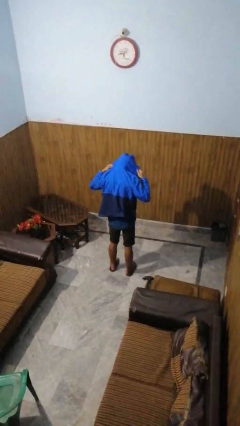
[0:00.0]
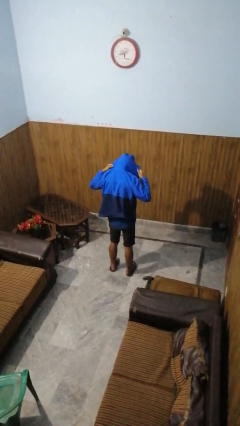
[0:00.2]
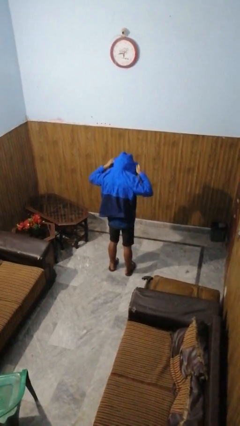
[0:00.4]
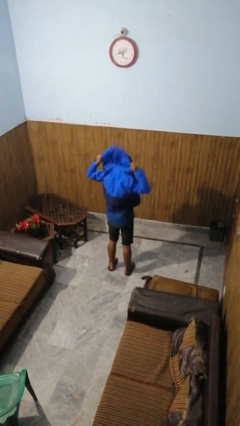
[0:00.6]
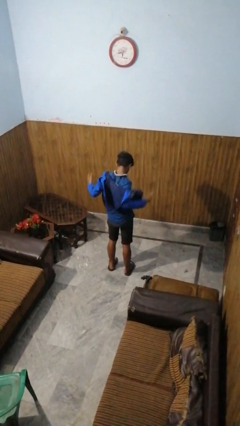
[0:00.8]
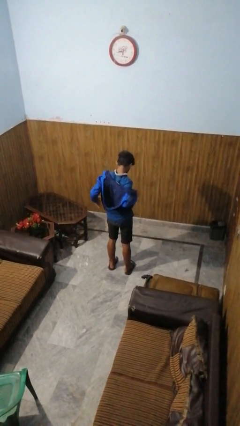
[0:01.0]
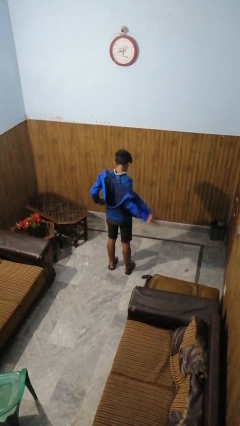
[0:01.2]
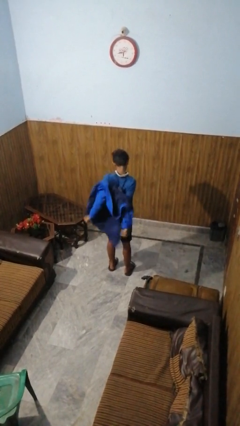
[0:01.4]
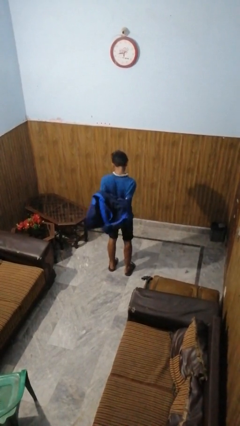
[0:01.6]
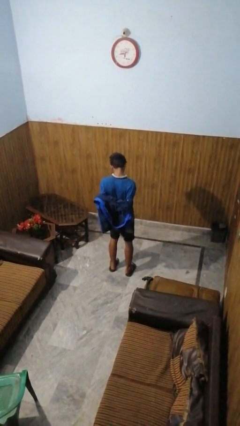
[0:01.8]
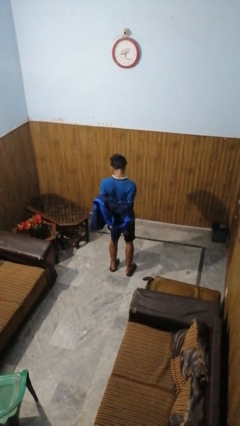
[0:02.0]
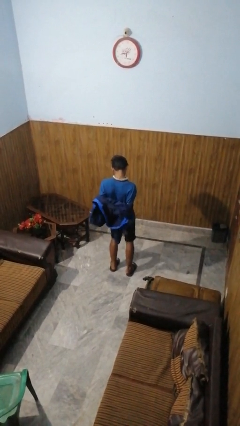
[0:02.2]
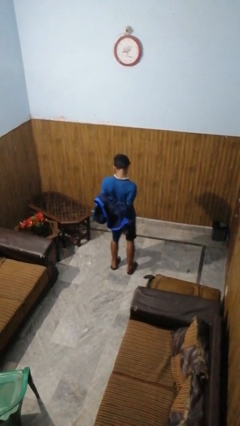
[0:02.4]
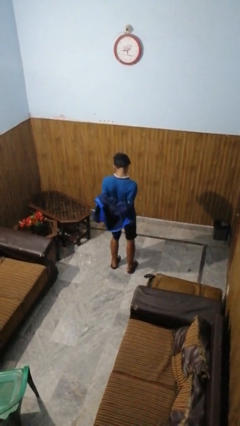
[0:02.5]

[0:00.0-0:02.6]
person takes off hoodie

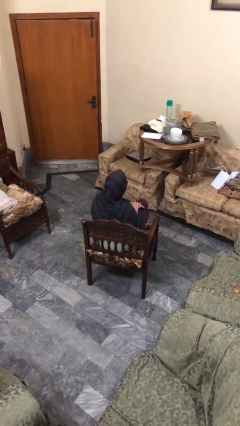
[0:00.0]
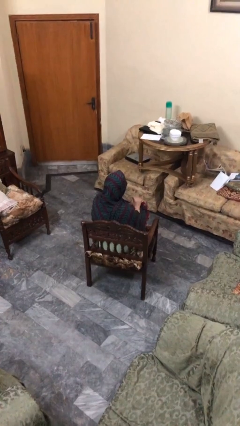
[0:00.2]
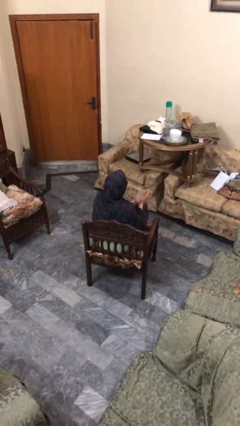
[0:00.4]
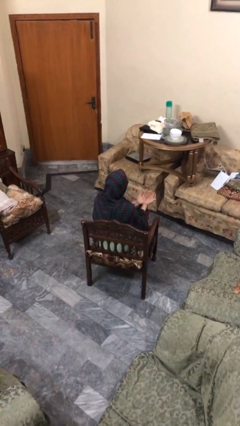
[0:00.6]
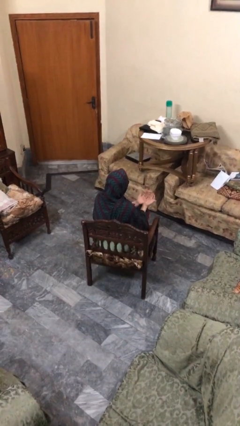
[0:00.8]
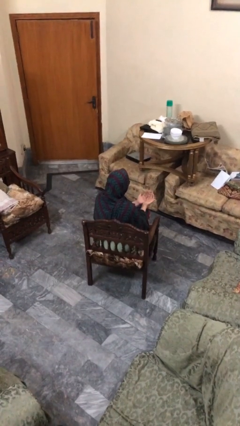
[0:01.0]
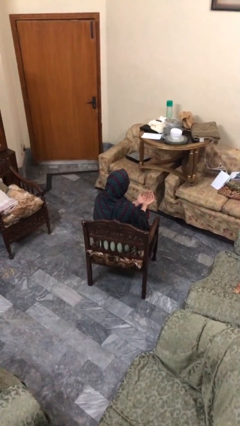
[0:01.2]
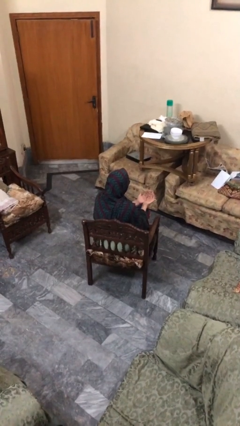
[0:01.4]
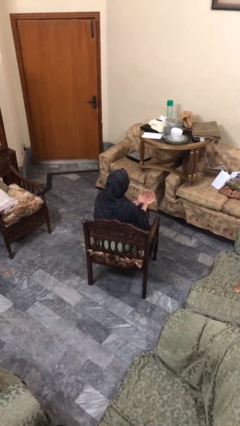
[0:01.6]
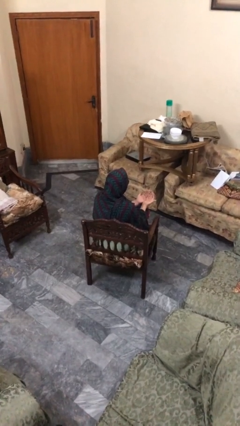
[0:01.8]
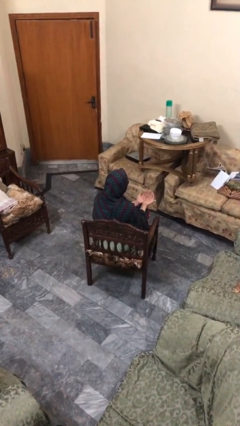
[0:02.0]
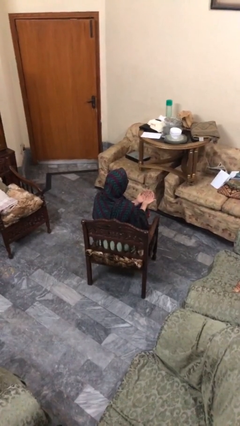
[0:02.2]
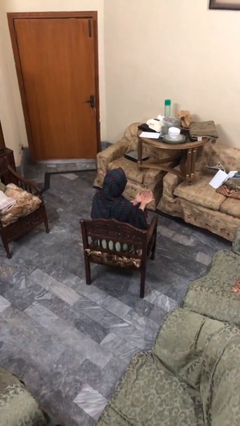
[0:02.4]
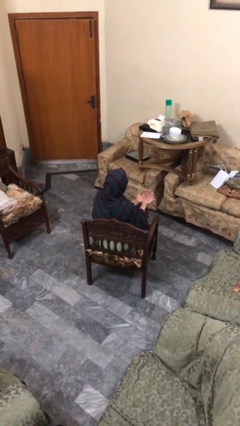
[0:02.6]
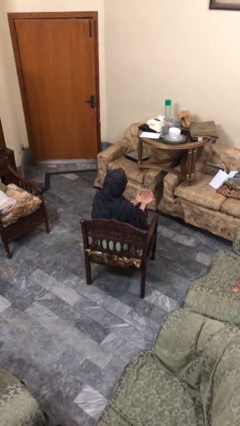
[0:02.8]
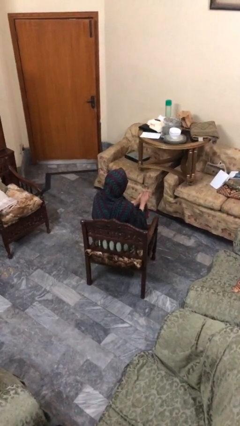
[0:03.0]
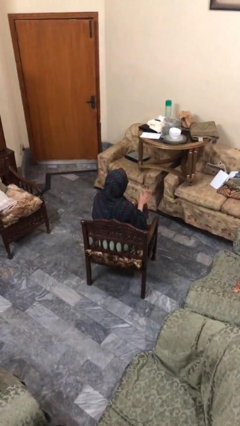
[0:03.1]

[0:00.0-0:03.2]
person looks at hands in lap

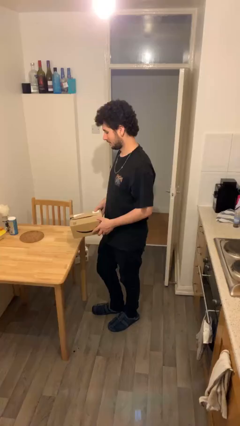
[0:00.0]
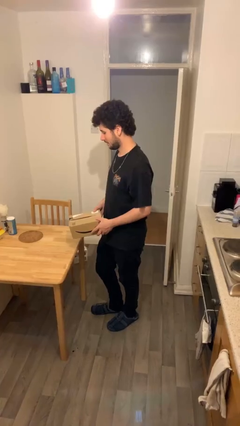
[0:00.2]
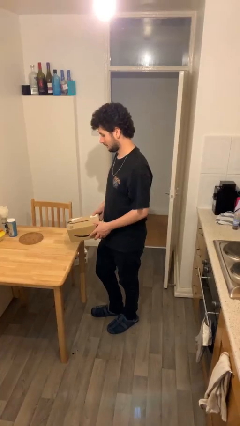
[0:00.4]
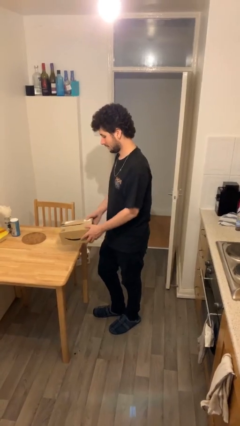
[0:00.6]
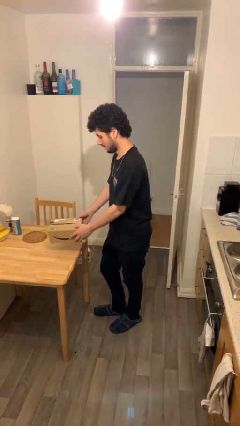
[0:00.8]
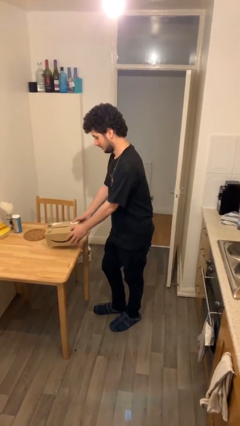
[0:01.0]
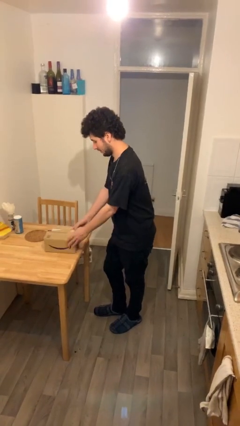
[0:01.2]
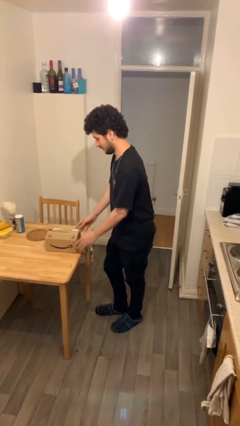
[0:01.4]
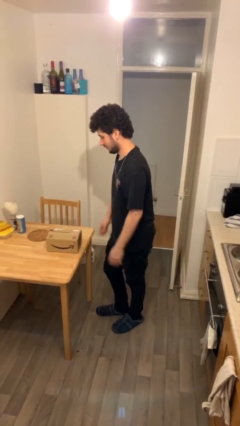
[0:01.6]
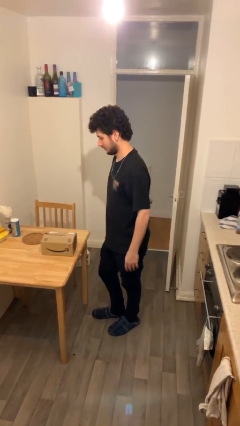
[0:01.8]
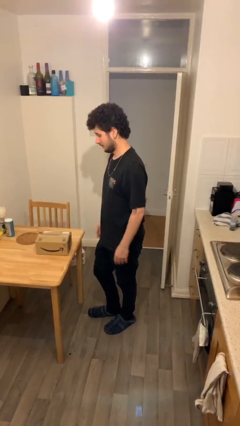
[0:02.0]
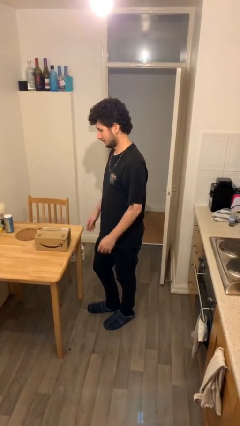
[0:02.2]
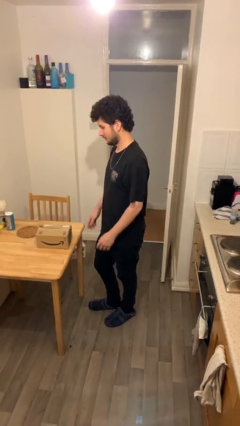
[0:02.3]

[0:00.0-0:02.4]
person puts down object on table

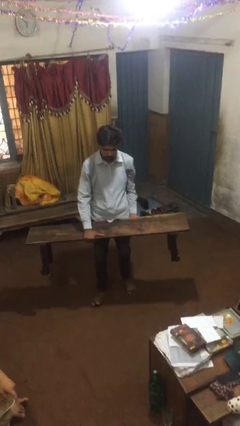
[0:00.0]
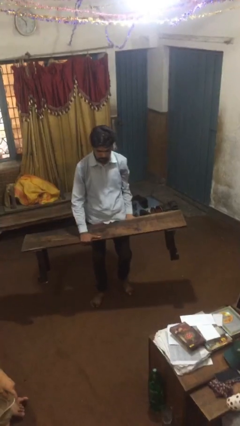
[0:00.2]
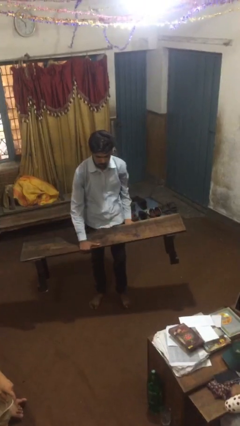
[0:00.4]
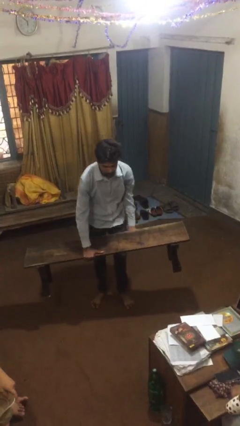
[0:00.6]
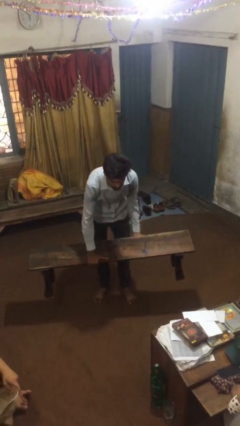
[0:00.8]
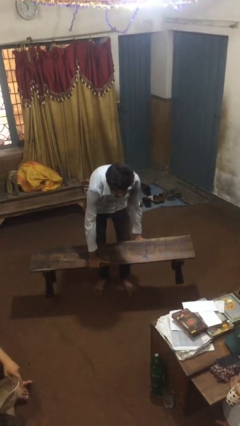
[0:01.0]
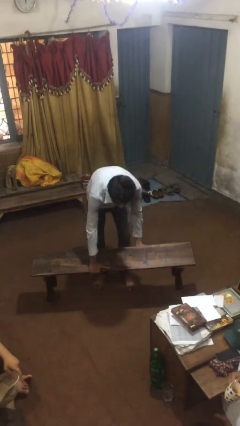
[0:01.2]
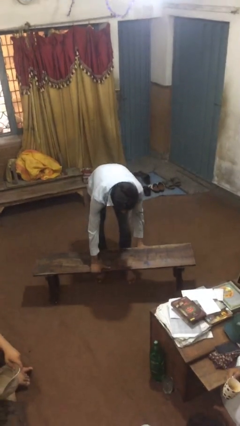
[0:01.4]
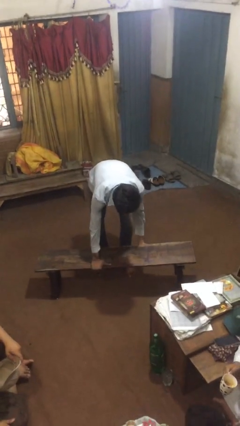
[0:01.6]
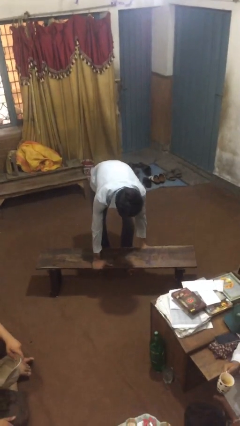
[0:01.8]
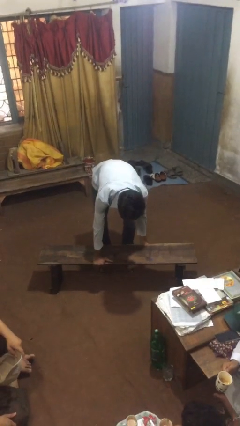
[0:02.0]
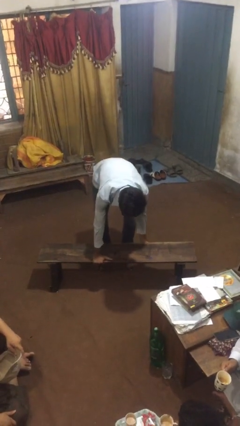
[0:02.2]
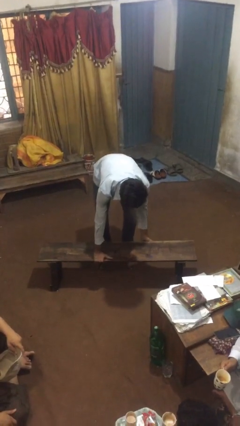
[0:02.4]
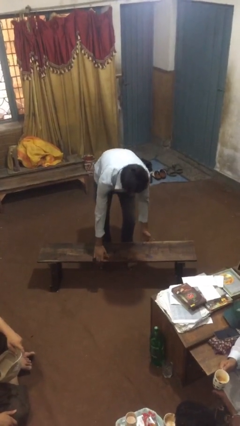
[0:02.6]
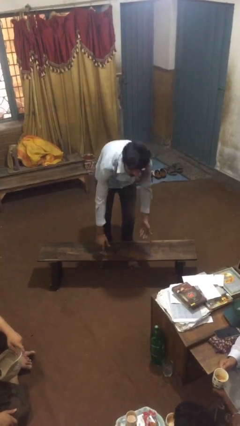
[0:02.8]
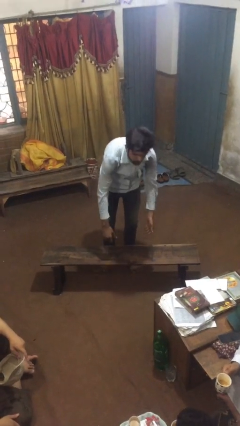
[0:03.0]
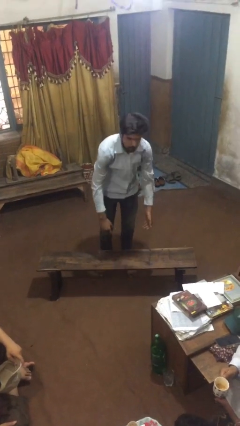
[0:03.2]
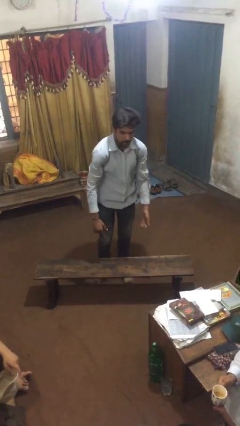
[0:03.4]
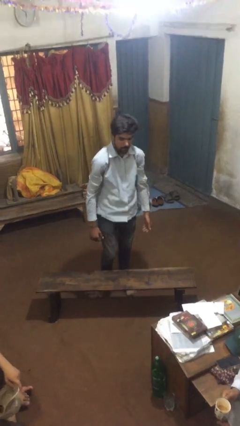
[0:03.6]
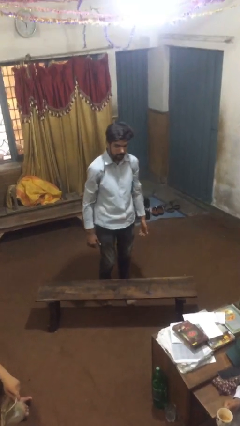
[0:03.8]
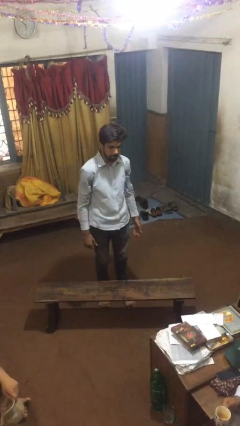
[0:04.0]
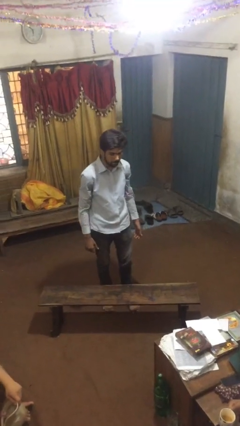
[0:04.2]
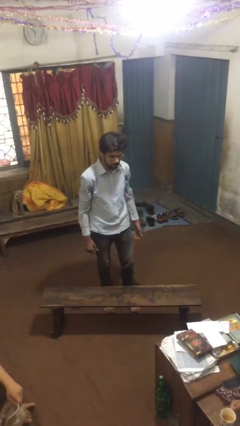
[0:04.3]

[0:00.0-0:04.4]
person puts down object on floor

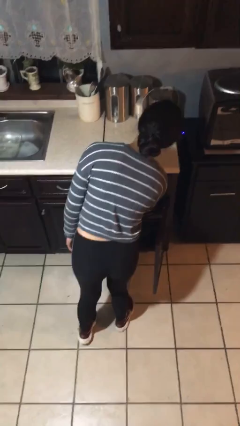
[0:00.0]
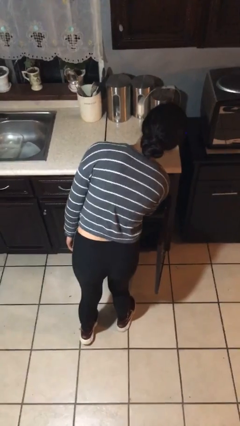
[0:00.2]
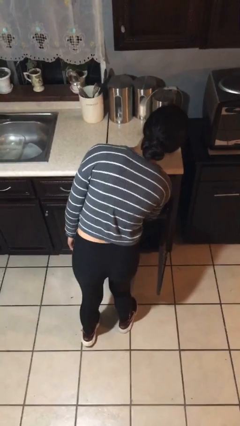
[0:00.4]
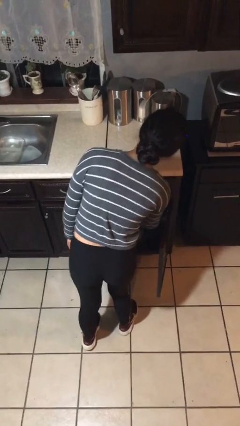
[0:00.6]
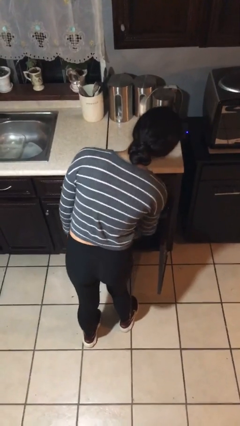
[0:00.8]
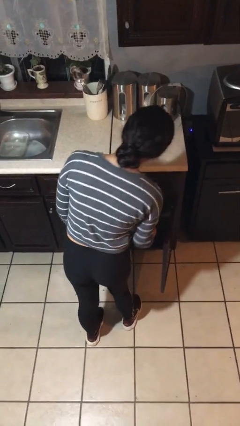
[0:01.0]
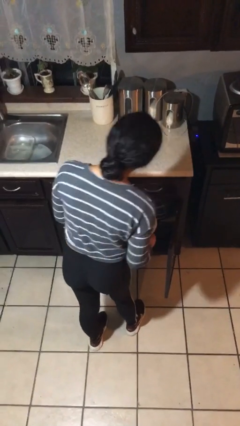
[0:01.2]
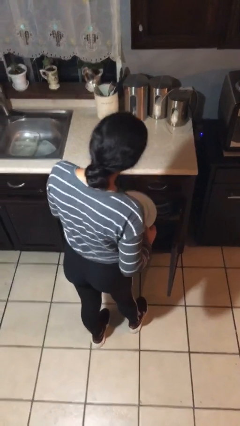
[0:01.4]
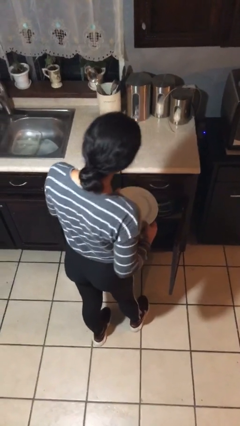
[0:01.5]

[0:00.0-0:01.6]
person puts object in cabinet

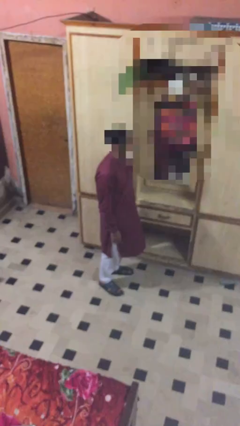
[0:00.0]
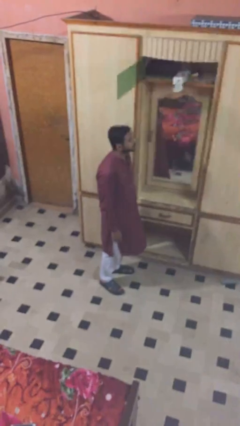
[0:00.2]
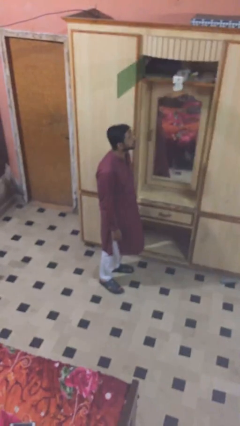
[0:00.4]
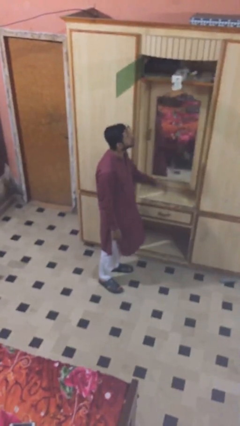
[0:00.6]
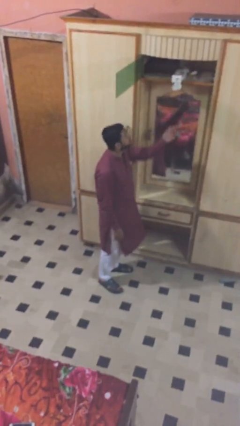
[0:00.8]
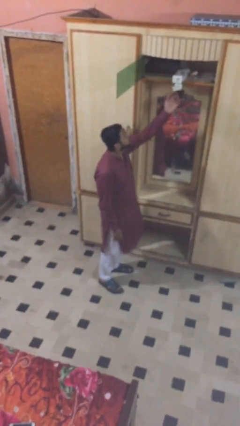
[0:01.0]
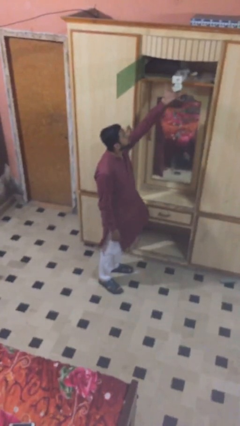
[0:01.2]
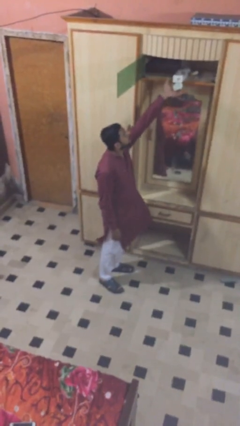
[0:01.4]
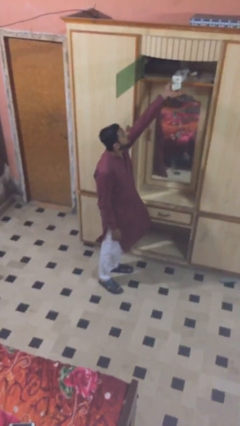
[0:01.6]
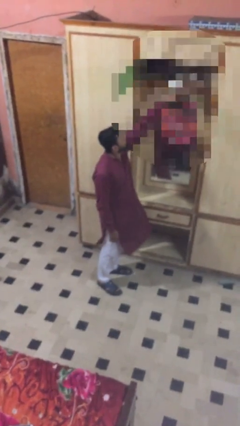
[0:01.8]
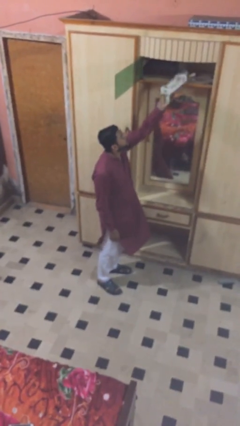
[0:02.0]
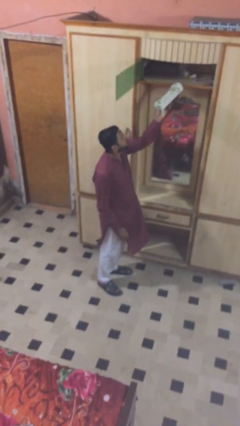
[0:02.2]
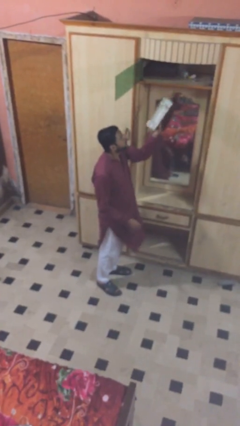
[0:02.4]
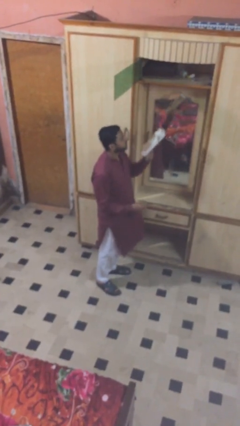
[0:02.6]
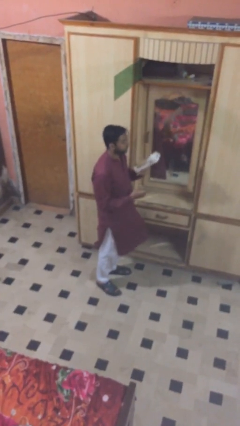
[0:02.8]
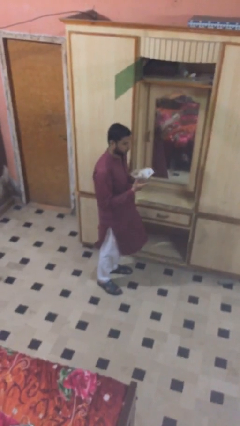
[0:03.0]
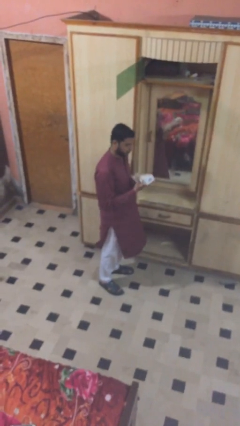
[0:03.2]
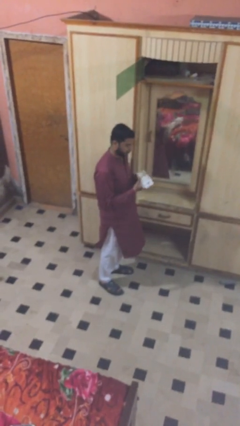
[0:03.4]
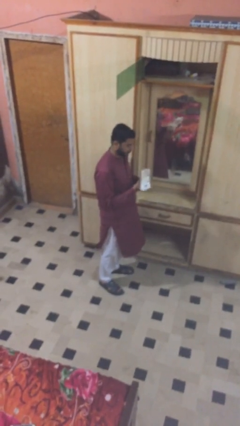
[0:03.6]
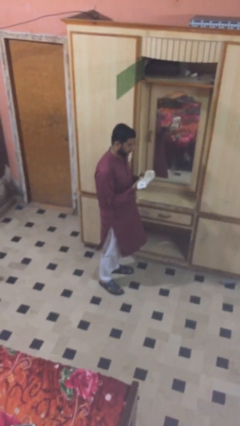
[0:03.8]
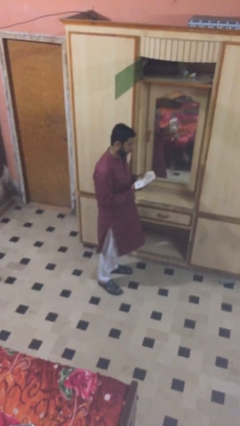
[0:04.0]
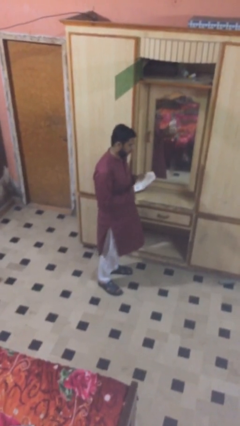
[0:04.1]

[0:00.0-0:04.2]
person picks up object from shelf
